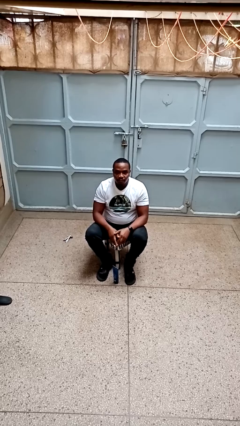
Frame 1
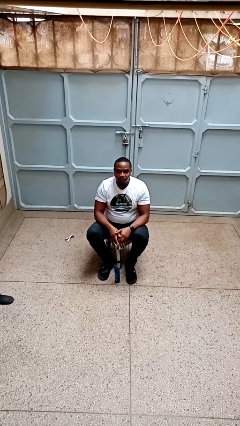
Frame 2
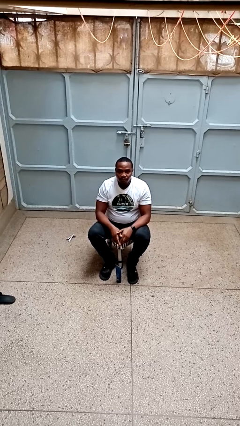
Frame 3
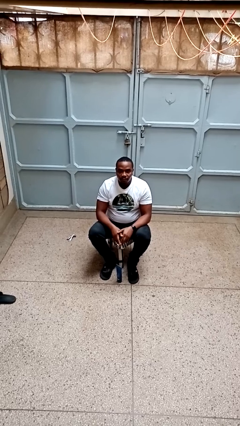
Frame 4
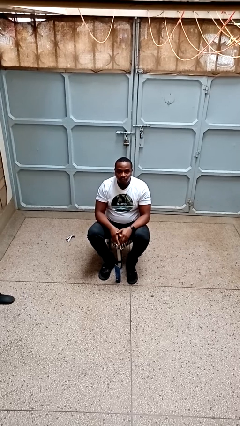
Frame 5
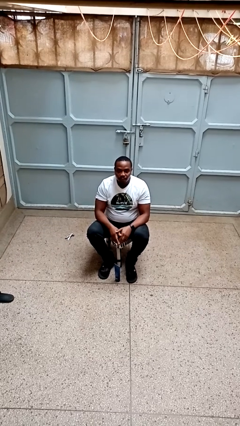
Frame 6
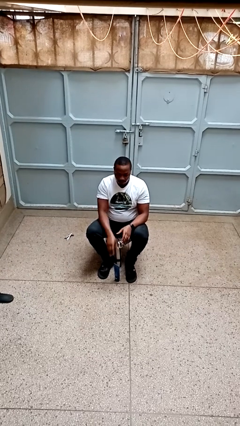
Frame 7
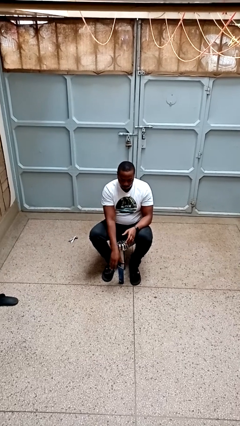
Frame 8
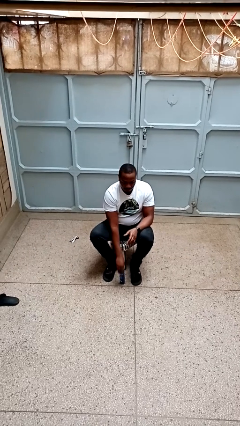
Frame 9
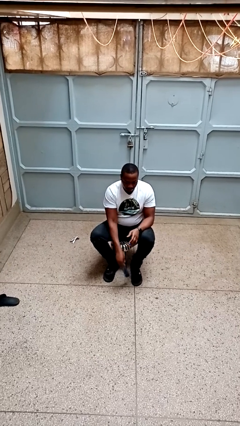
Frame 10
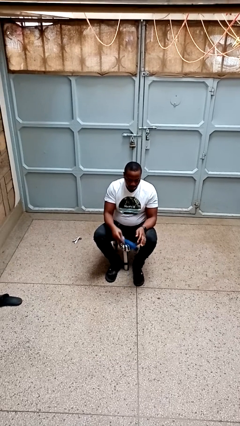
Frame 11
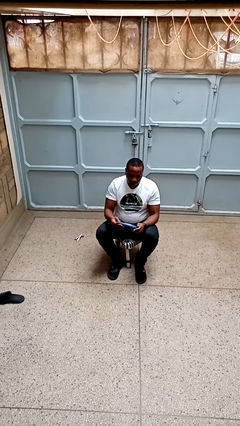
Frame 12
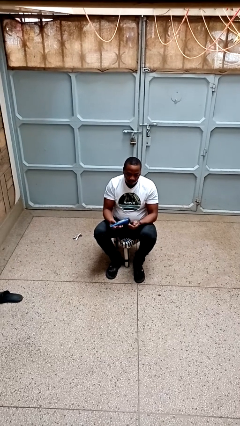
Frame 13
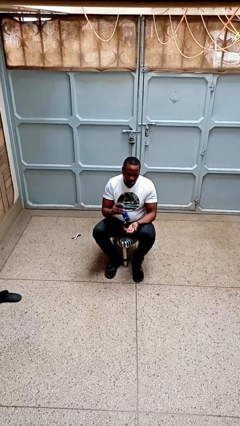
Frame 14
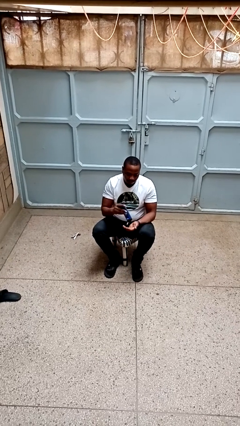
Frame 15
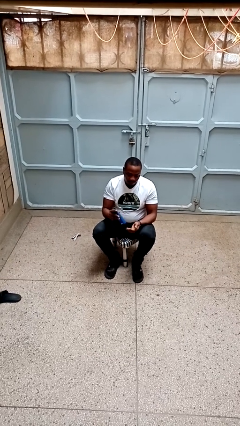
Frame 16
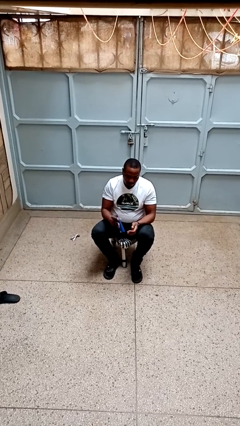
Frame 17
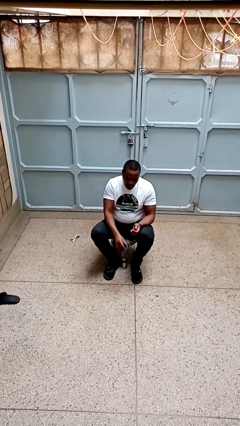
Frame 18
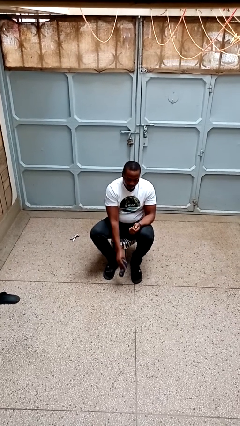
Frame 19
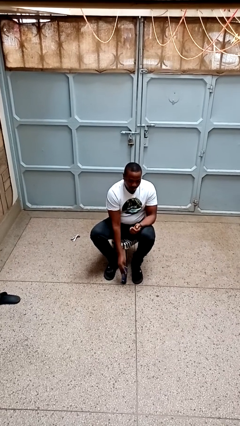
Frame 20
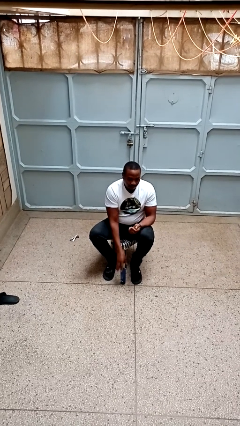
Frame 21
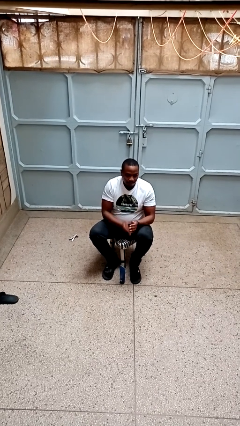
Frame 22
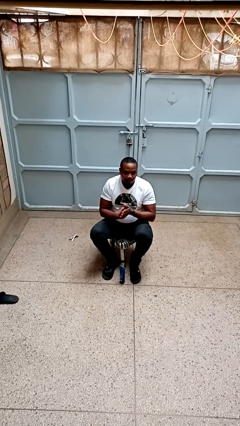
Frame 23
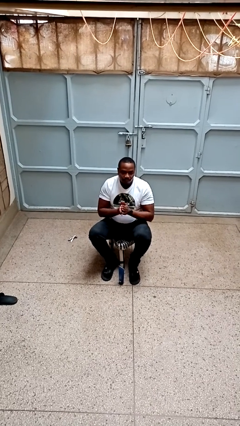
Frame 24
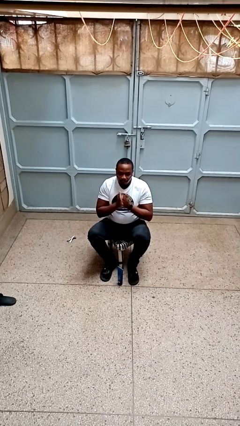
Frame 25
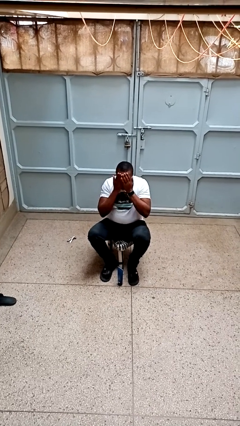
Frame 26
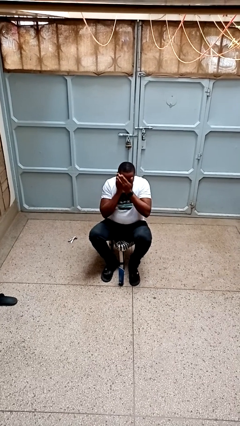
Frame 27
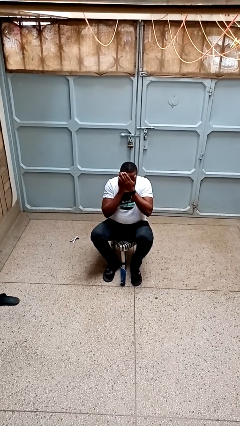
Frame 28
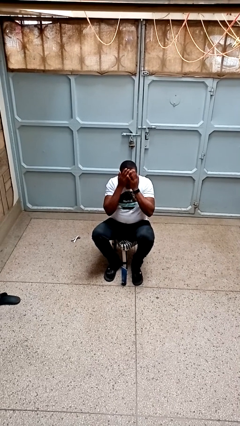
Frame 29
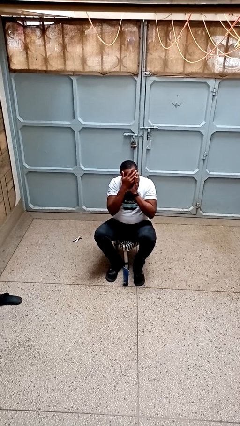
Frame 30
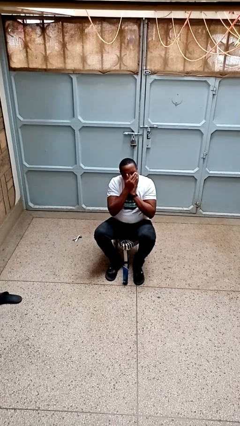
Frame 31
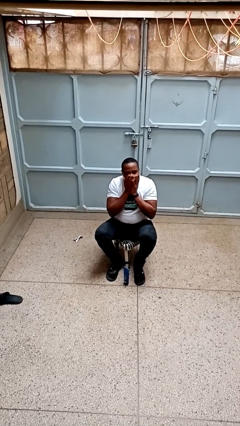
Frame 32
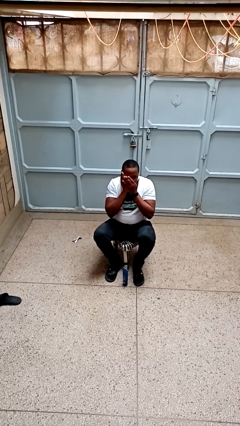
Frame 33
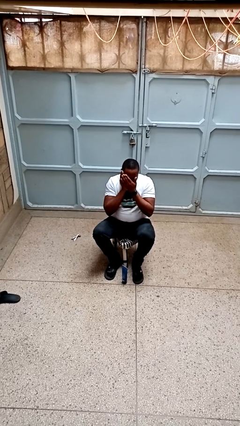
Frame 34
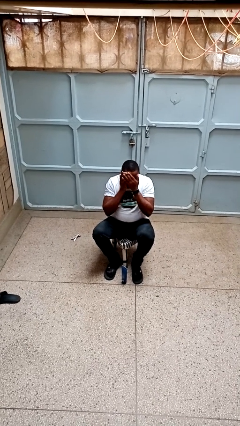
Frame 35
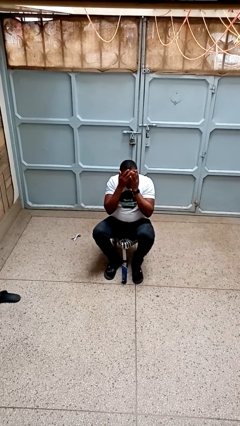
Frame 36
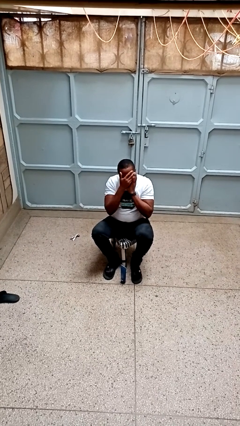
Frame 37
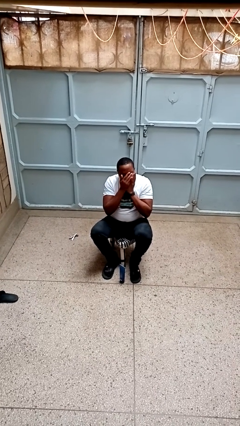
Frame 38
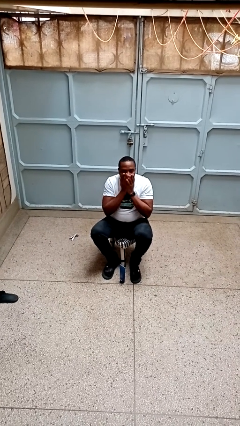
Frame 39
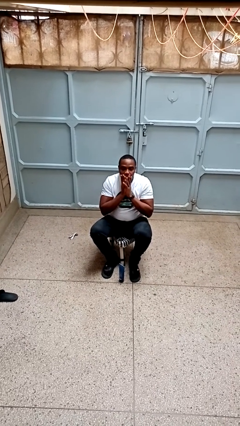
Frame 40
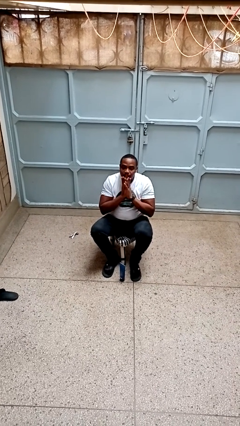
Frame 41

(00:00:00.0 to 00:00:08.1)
person applies facial moisturizer

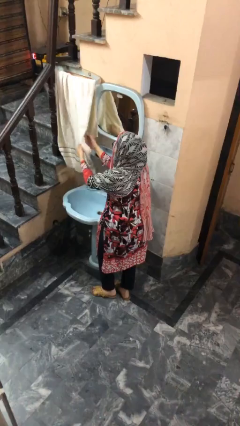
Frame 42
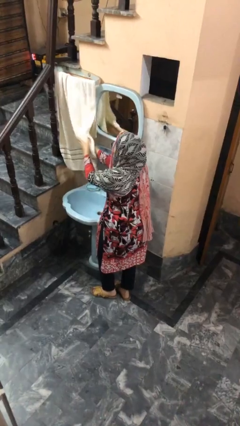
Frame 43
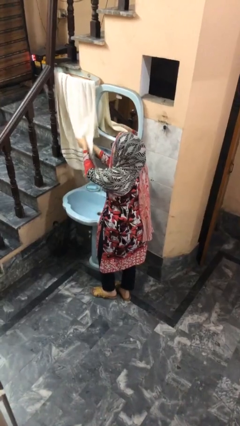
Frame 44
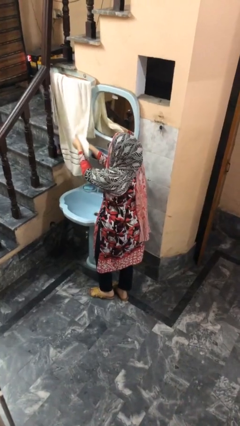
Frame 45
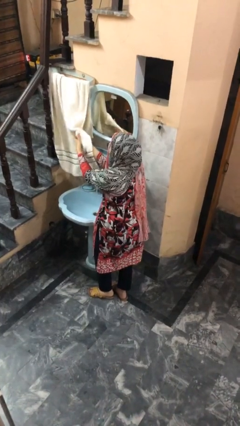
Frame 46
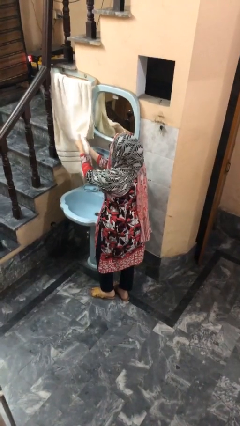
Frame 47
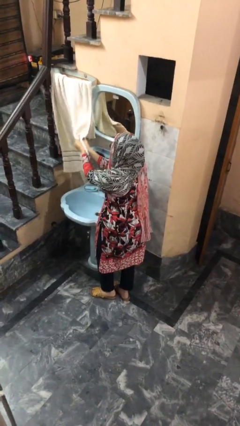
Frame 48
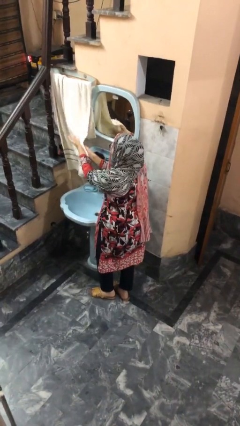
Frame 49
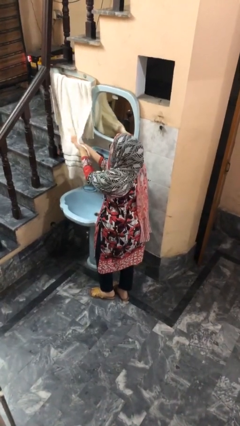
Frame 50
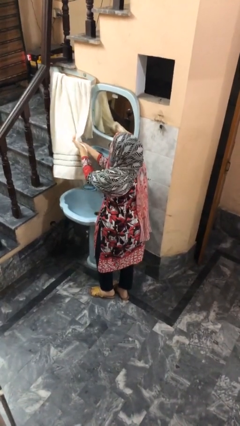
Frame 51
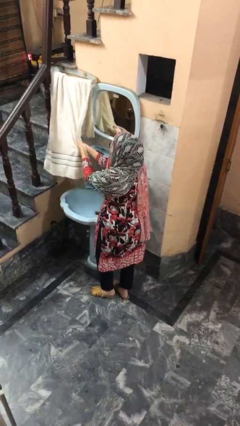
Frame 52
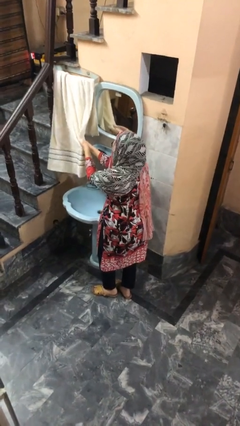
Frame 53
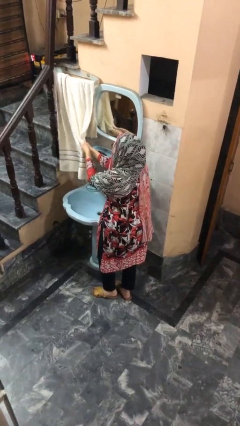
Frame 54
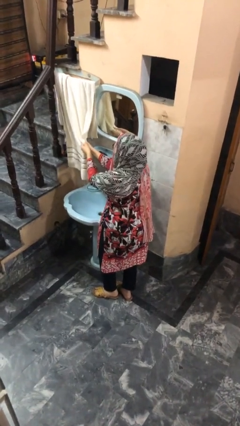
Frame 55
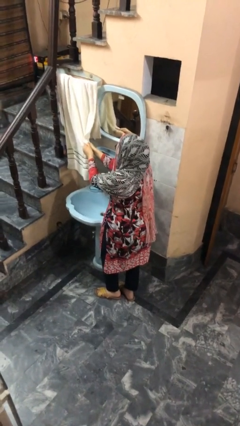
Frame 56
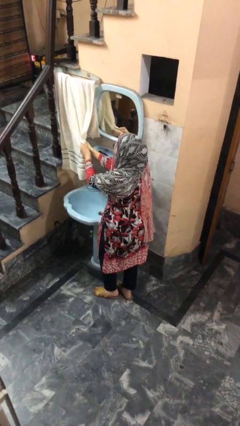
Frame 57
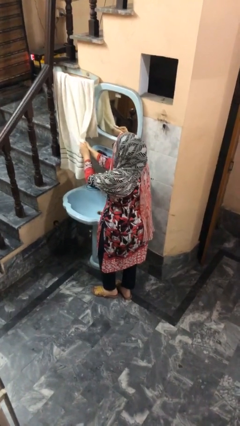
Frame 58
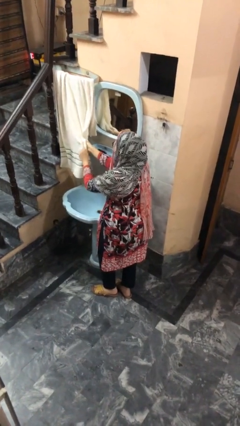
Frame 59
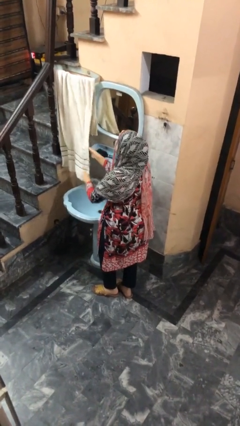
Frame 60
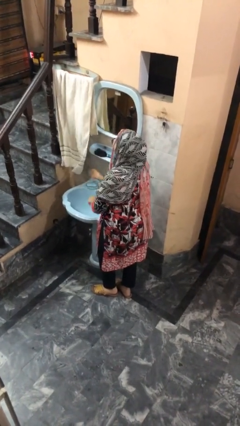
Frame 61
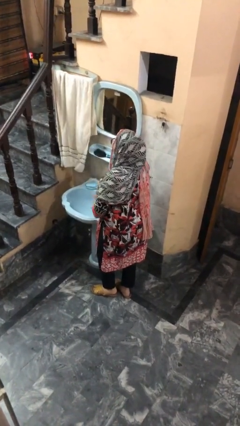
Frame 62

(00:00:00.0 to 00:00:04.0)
person dries face with towel

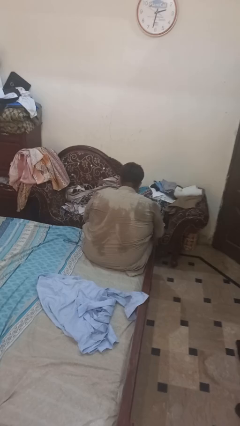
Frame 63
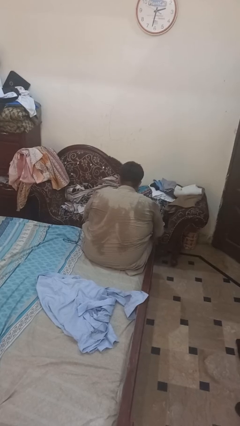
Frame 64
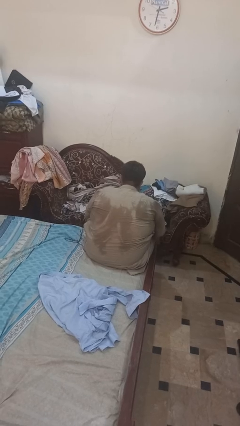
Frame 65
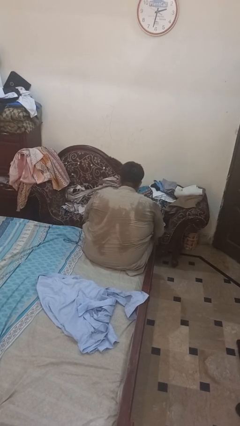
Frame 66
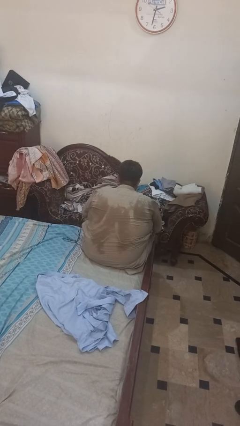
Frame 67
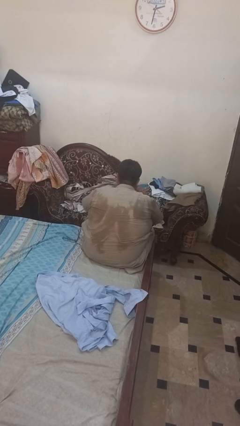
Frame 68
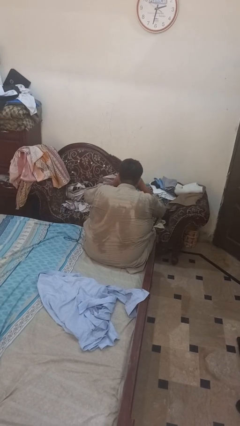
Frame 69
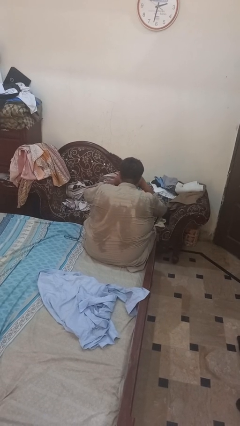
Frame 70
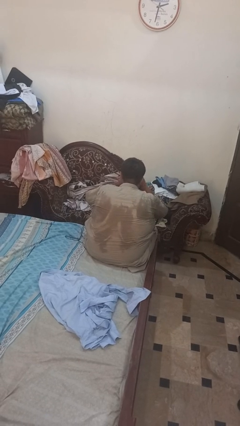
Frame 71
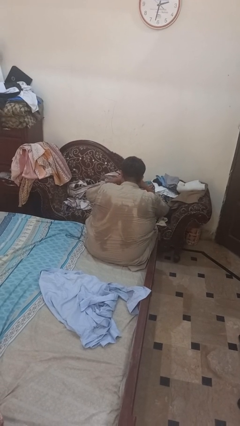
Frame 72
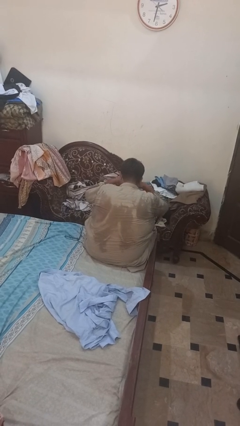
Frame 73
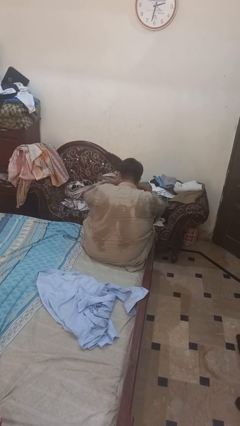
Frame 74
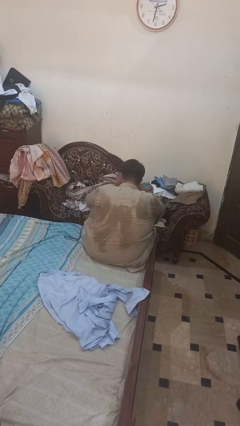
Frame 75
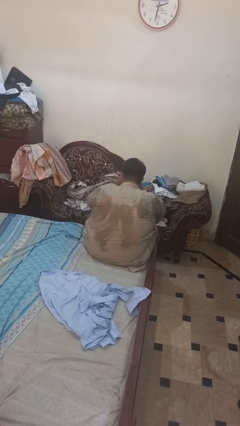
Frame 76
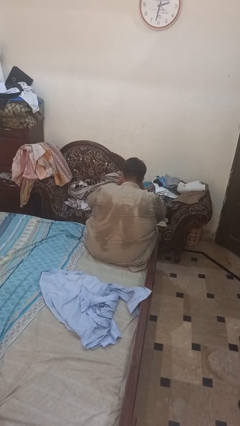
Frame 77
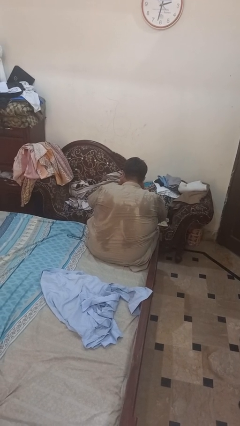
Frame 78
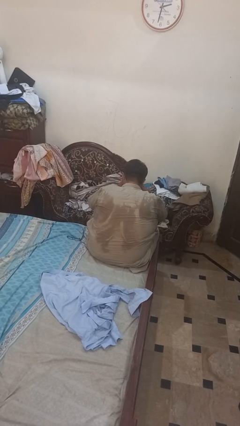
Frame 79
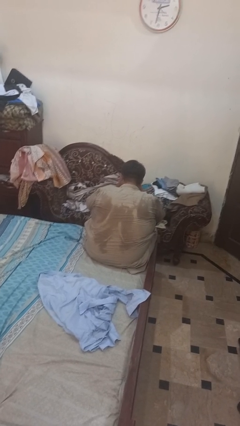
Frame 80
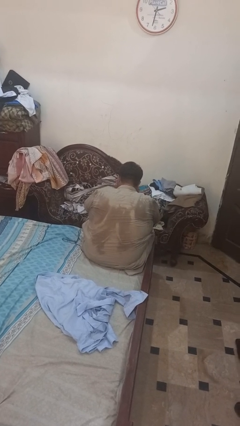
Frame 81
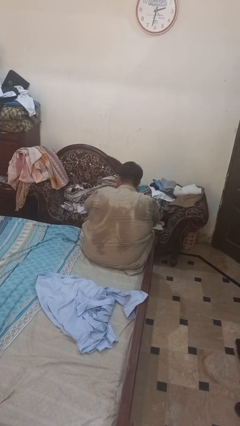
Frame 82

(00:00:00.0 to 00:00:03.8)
person rubs eyes

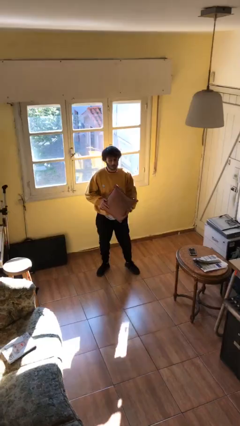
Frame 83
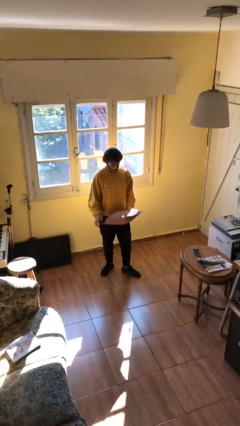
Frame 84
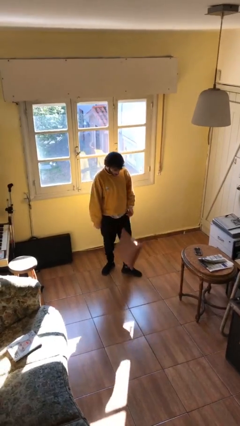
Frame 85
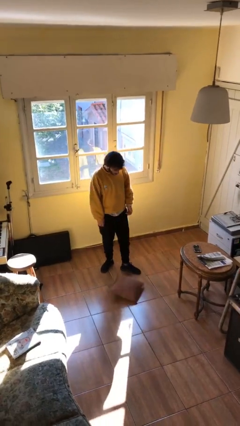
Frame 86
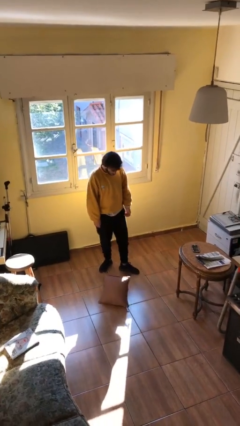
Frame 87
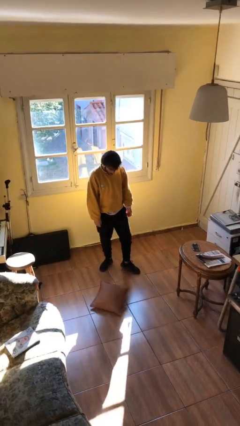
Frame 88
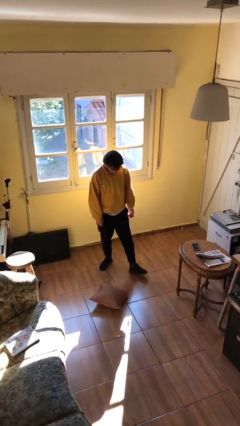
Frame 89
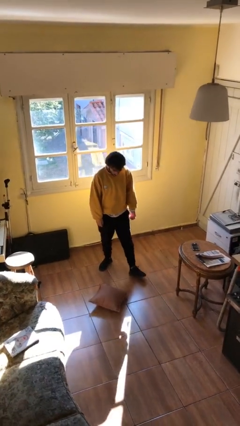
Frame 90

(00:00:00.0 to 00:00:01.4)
person drops object

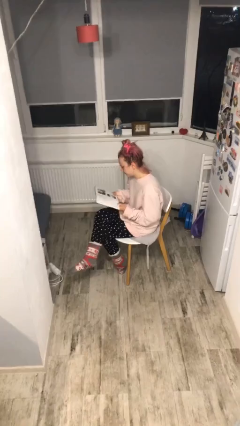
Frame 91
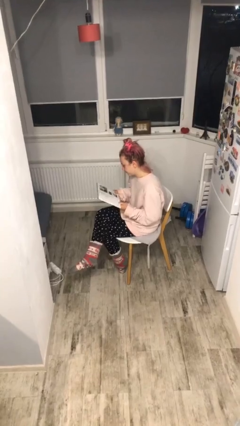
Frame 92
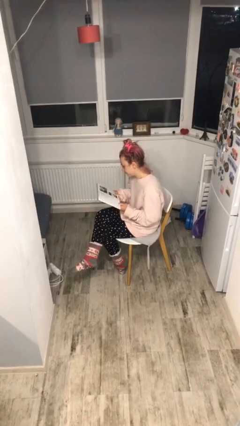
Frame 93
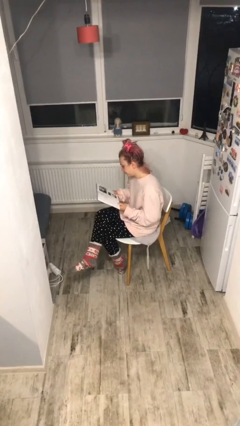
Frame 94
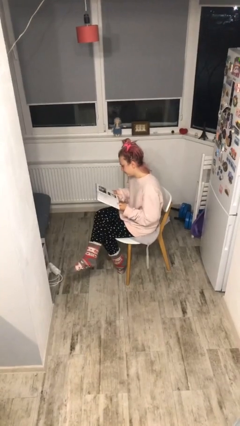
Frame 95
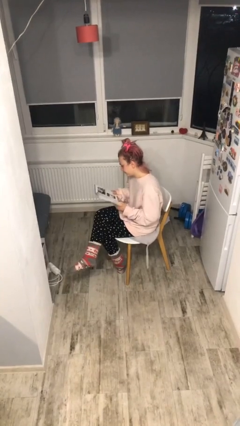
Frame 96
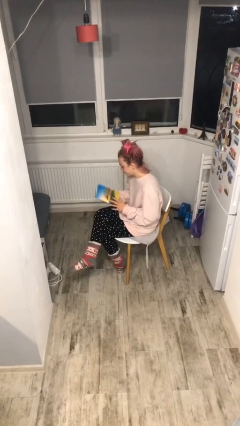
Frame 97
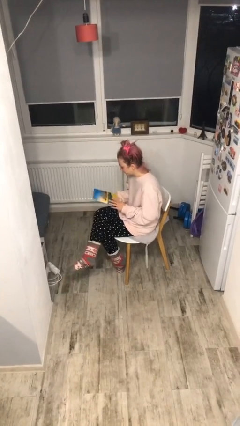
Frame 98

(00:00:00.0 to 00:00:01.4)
person reads document
